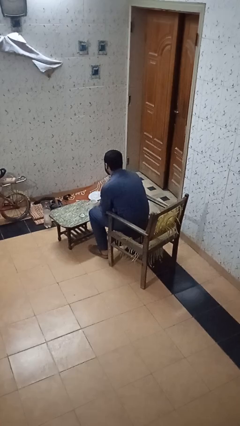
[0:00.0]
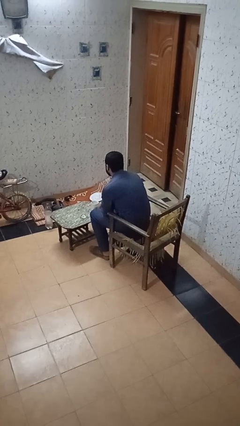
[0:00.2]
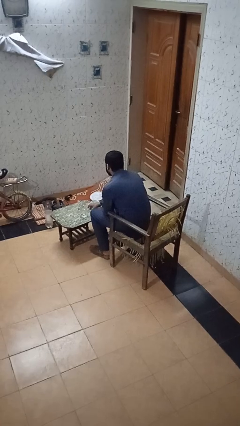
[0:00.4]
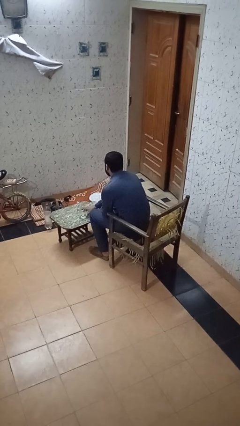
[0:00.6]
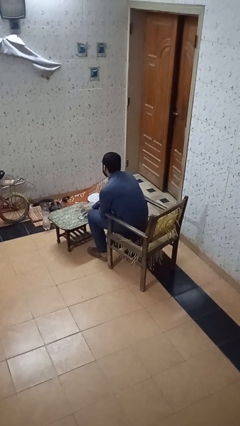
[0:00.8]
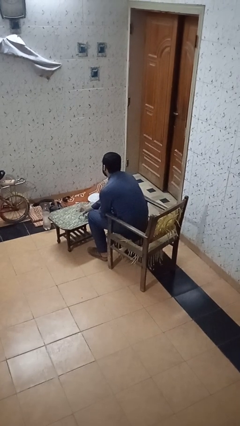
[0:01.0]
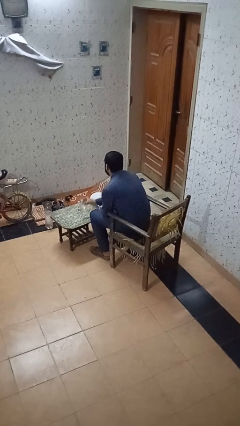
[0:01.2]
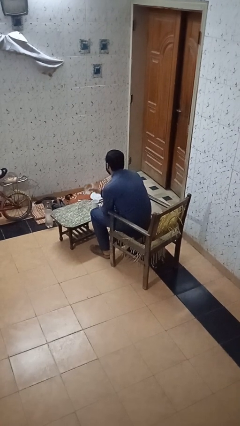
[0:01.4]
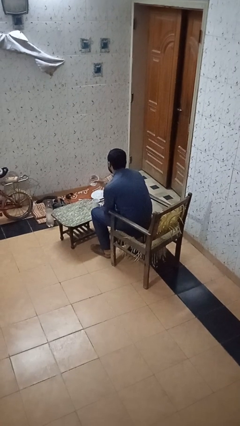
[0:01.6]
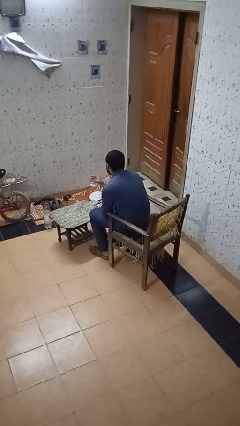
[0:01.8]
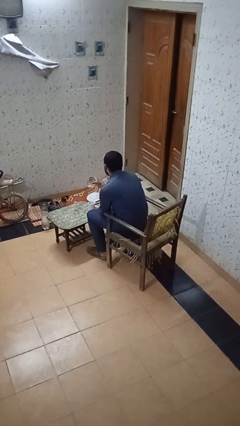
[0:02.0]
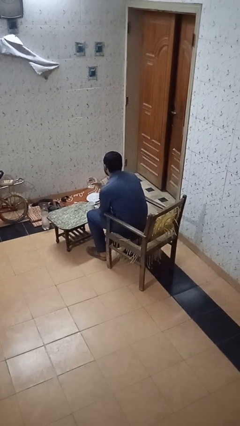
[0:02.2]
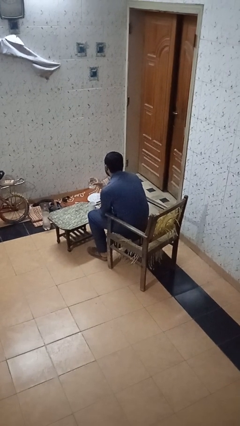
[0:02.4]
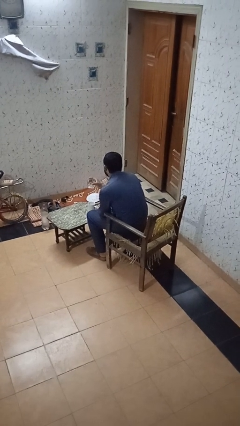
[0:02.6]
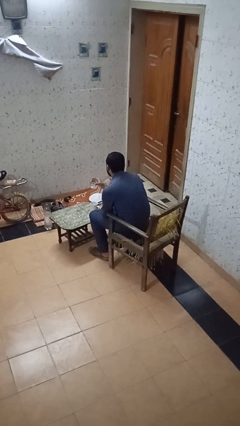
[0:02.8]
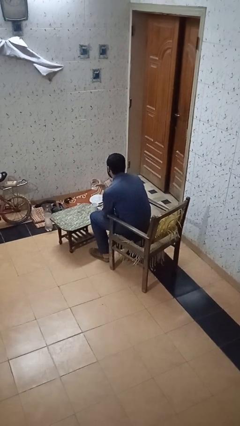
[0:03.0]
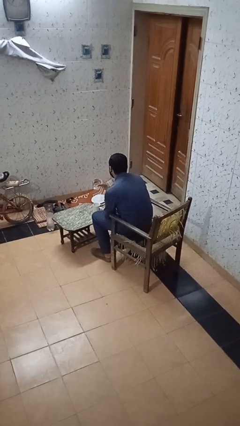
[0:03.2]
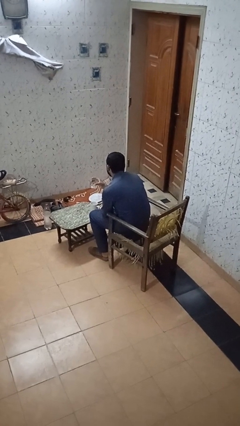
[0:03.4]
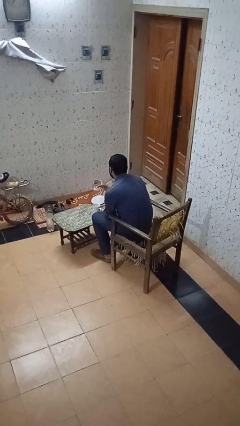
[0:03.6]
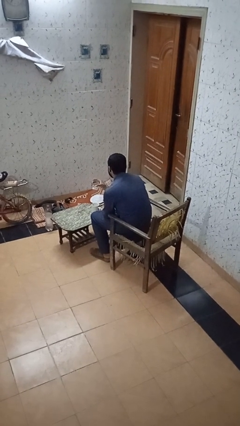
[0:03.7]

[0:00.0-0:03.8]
person picks up object from table

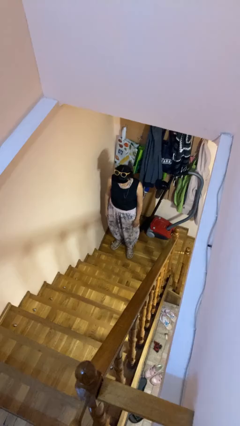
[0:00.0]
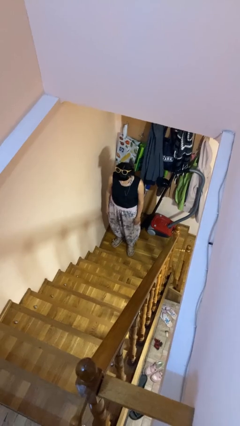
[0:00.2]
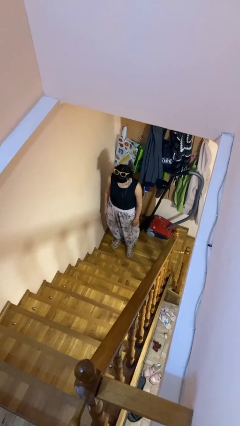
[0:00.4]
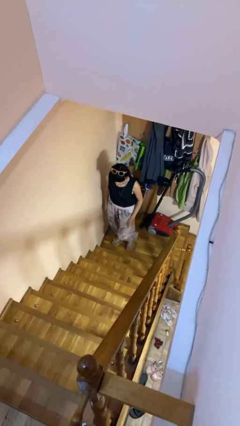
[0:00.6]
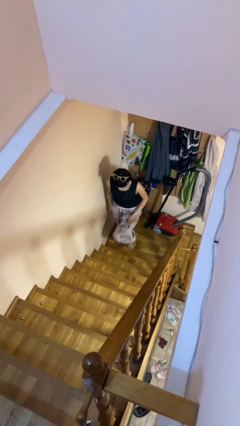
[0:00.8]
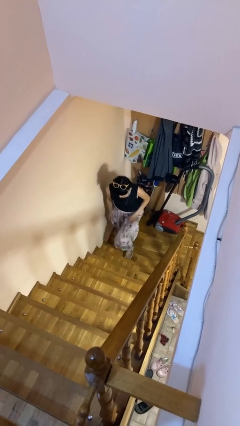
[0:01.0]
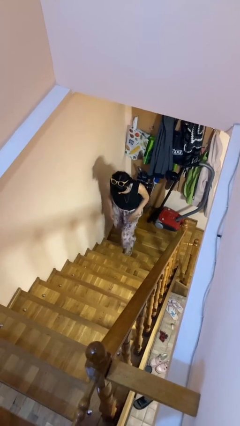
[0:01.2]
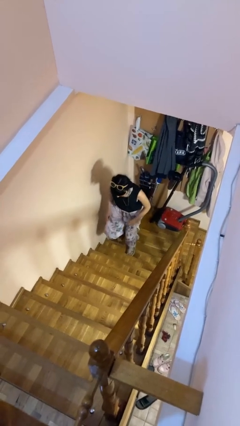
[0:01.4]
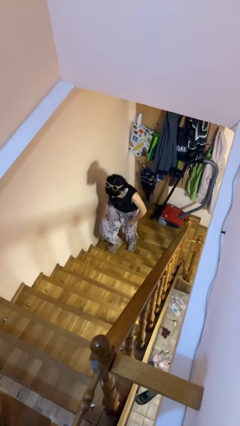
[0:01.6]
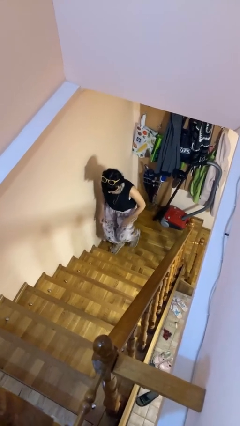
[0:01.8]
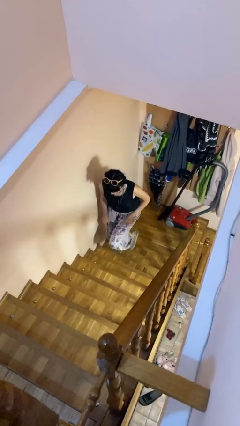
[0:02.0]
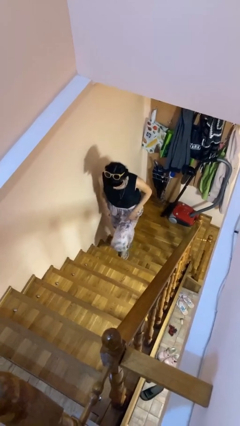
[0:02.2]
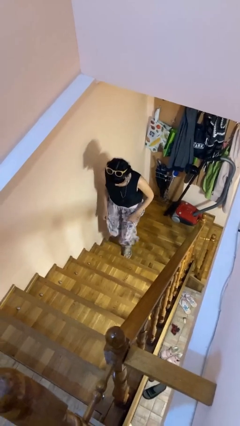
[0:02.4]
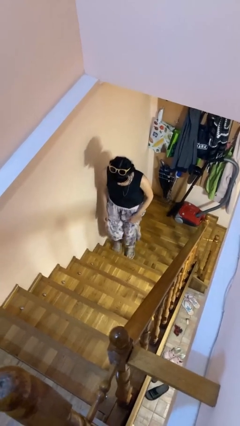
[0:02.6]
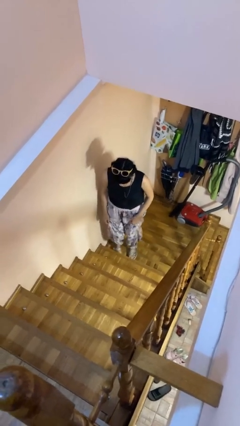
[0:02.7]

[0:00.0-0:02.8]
person climbs up stairs

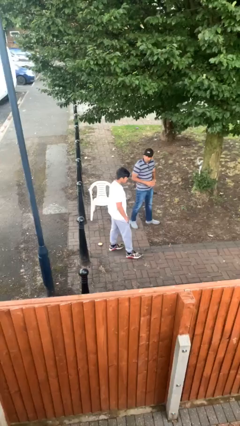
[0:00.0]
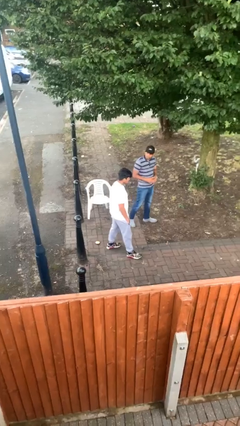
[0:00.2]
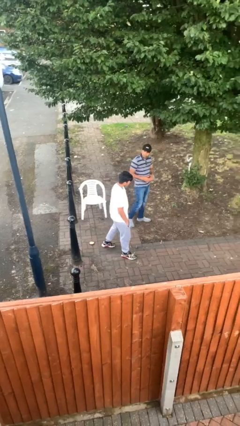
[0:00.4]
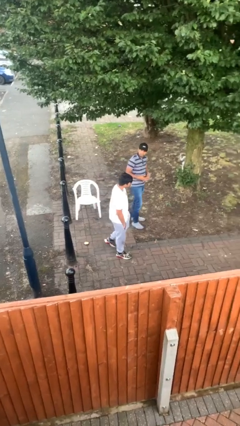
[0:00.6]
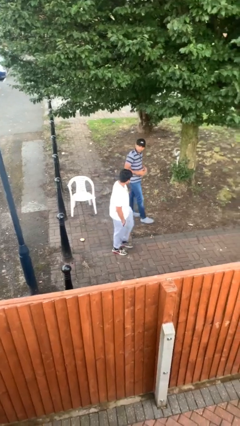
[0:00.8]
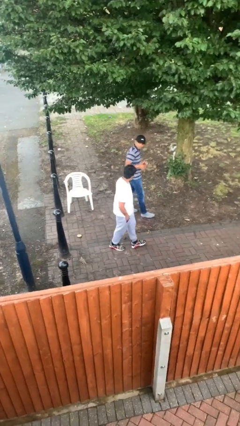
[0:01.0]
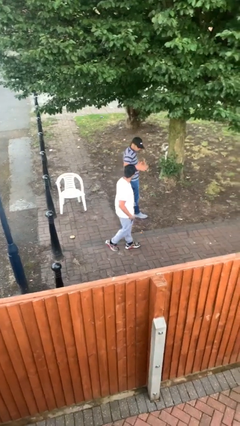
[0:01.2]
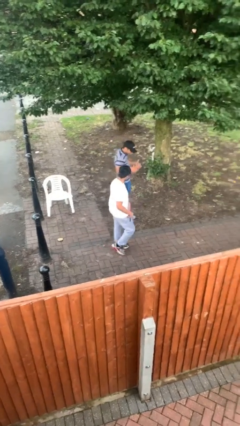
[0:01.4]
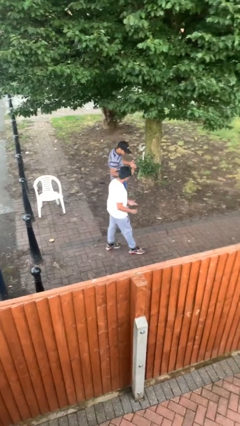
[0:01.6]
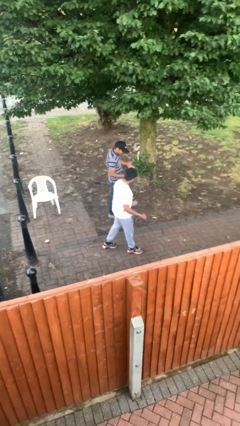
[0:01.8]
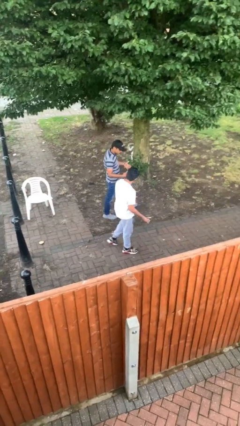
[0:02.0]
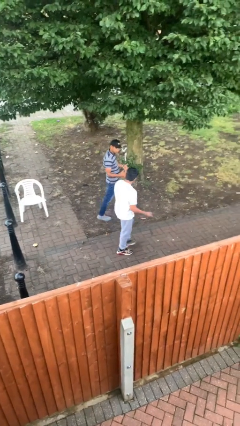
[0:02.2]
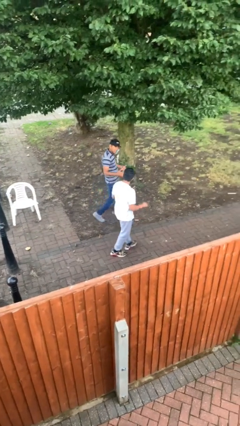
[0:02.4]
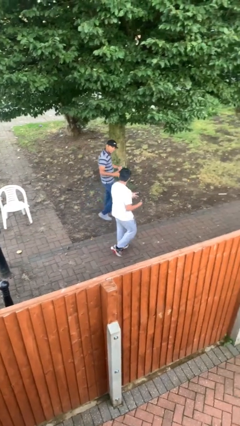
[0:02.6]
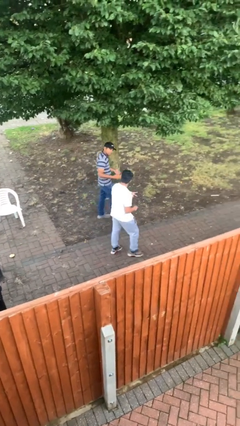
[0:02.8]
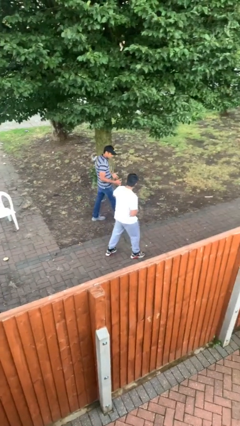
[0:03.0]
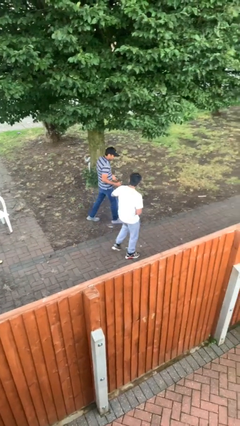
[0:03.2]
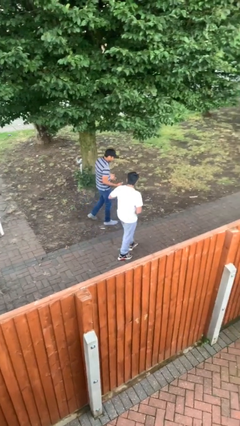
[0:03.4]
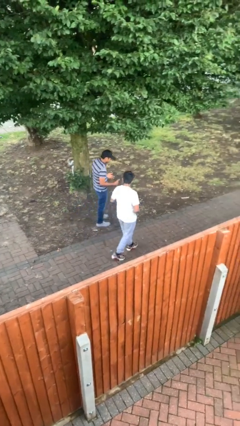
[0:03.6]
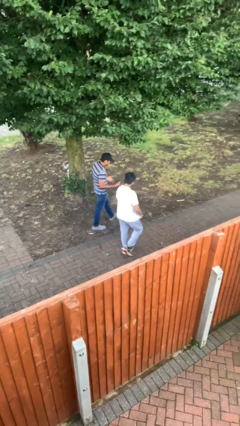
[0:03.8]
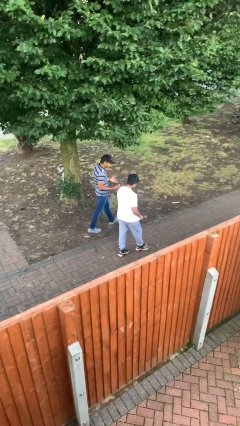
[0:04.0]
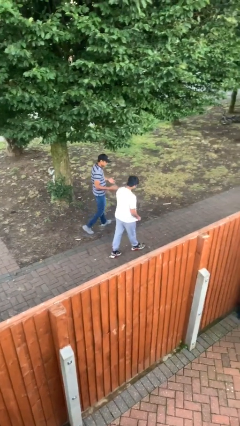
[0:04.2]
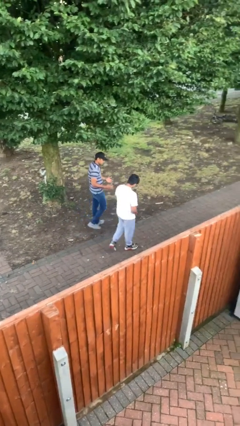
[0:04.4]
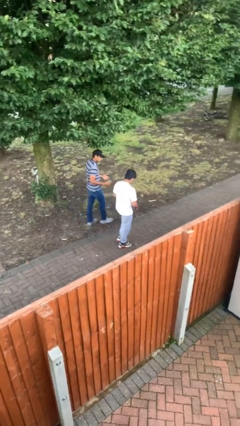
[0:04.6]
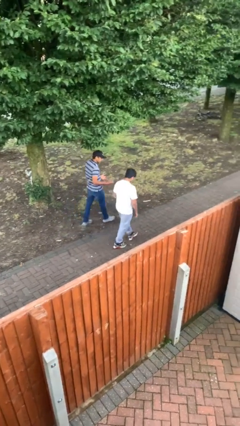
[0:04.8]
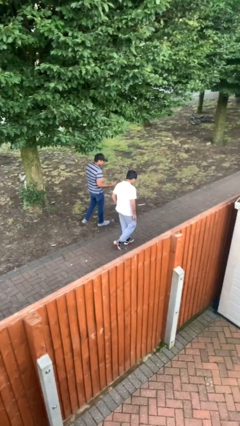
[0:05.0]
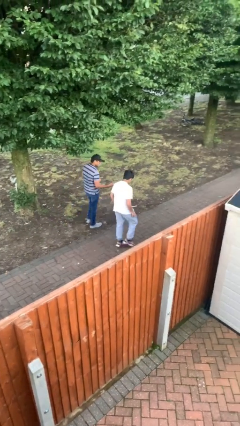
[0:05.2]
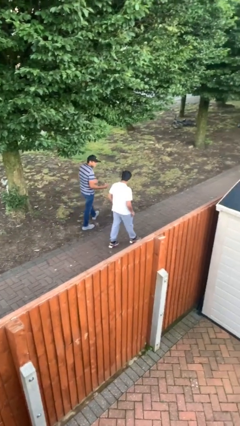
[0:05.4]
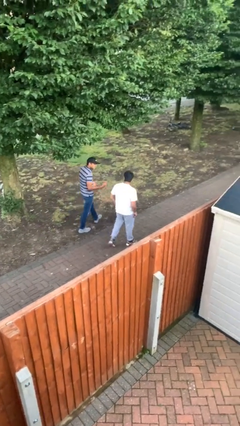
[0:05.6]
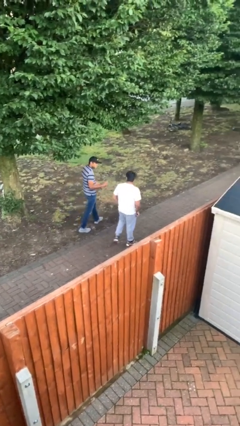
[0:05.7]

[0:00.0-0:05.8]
person talks to person

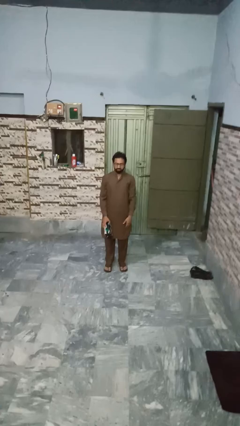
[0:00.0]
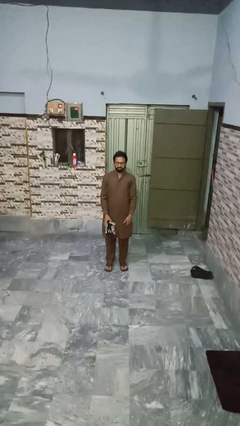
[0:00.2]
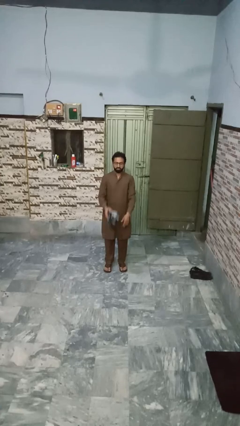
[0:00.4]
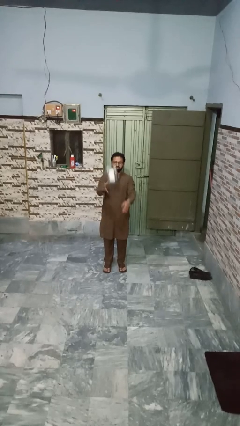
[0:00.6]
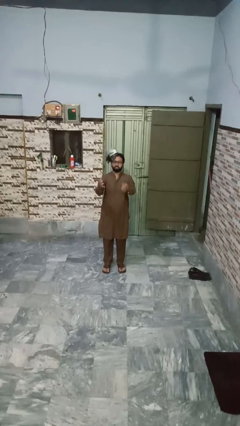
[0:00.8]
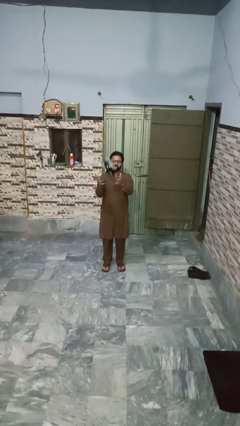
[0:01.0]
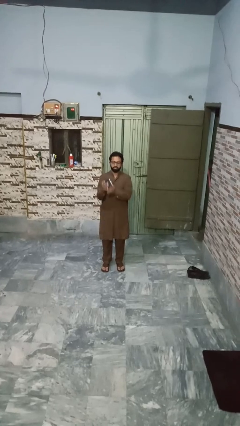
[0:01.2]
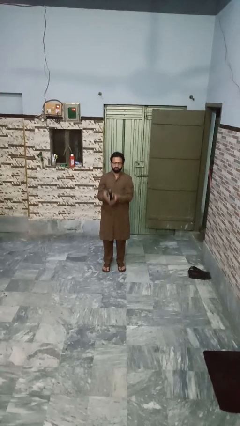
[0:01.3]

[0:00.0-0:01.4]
person drops object

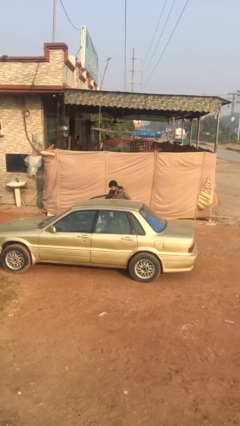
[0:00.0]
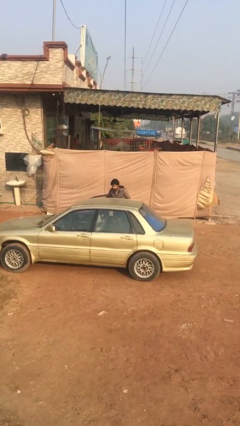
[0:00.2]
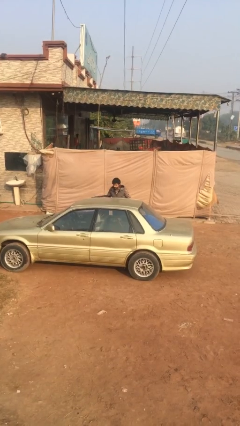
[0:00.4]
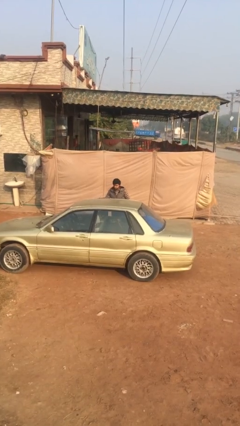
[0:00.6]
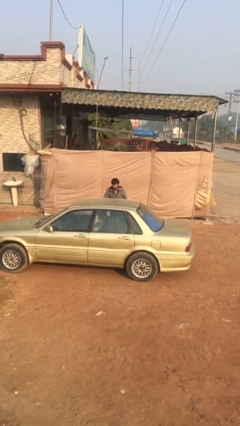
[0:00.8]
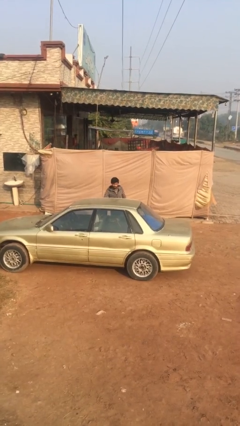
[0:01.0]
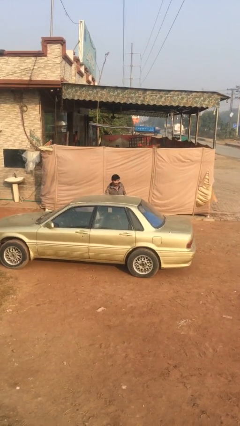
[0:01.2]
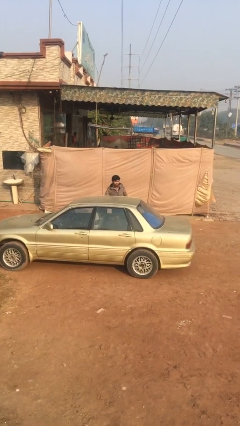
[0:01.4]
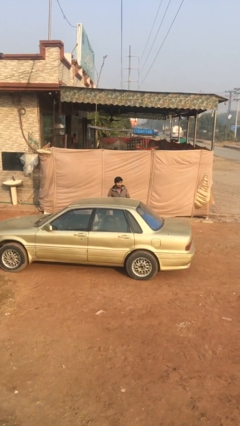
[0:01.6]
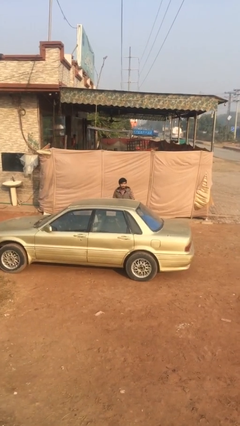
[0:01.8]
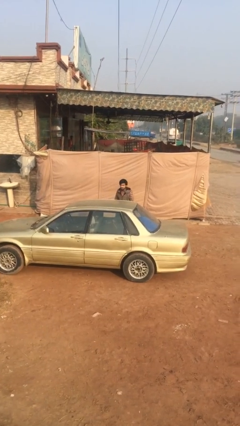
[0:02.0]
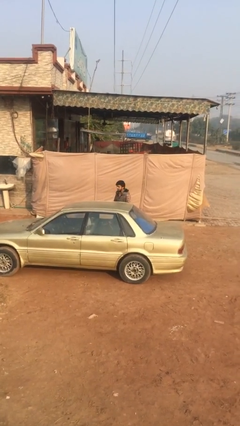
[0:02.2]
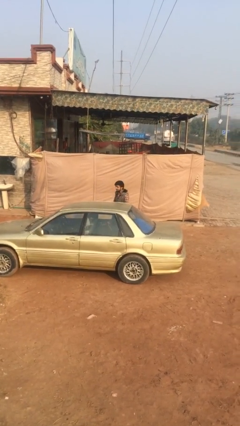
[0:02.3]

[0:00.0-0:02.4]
person closes car door

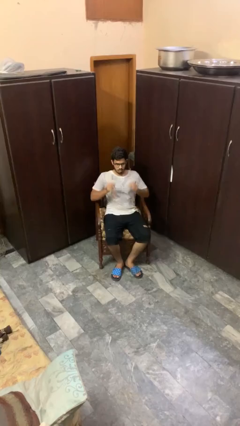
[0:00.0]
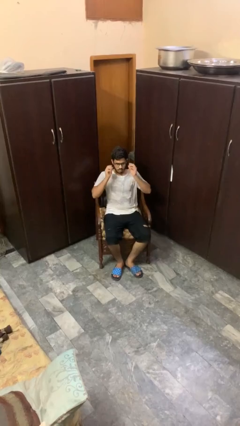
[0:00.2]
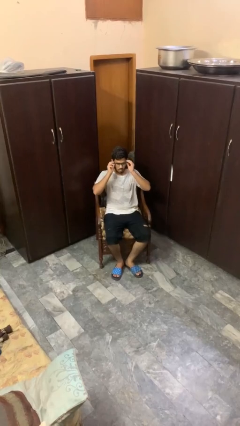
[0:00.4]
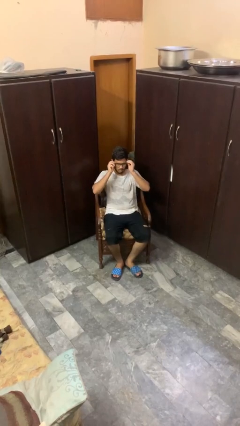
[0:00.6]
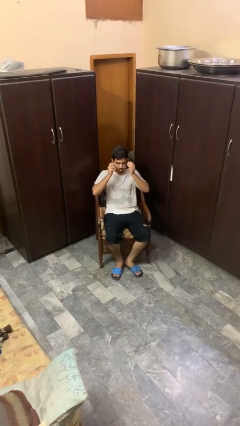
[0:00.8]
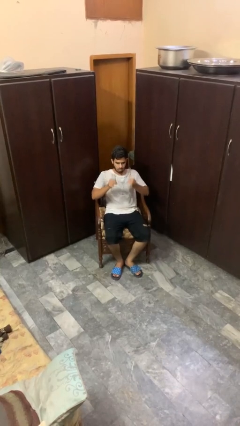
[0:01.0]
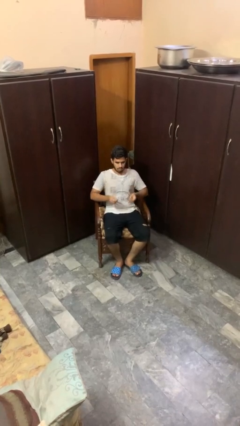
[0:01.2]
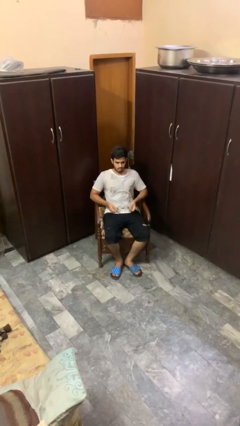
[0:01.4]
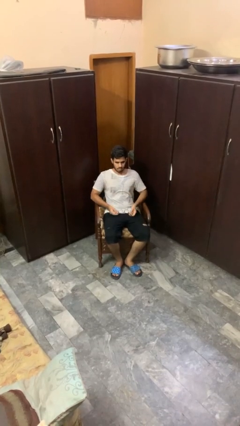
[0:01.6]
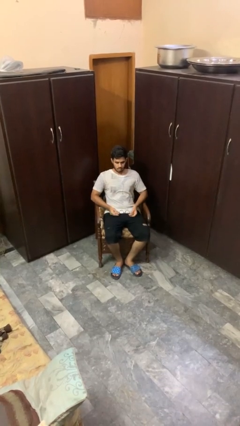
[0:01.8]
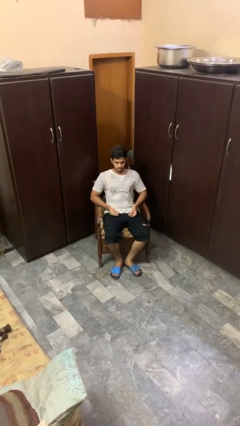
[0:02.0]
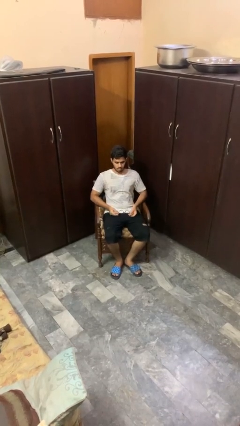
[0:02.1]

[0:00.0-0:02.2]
person takes off glasses
